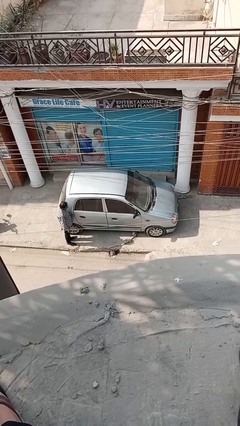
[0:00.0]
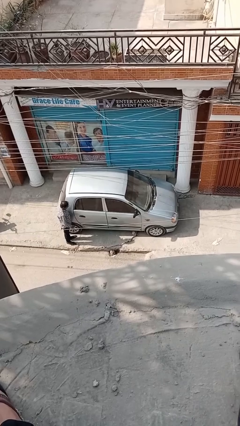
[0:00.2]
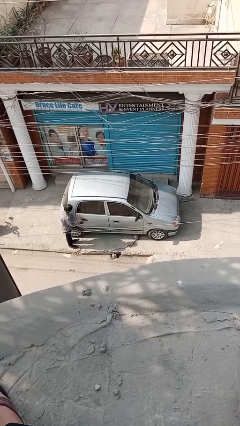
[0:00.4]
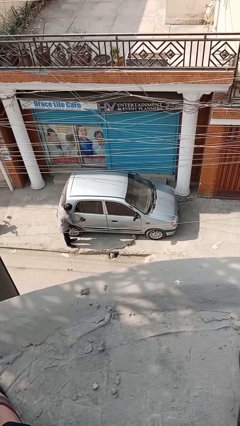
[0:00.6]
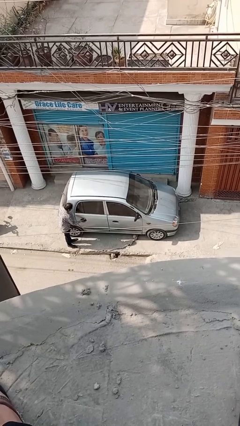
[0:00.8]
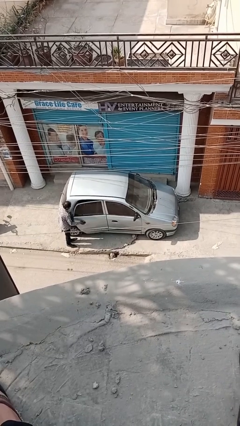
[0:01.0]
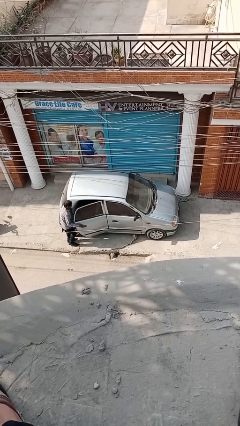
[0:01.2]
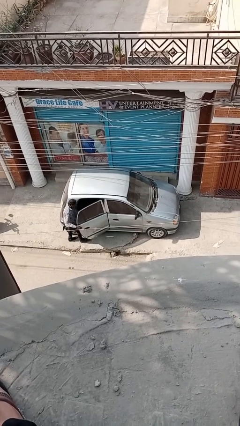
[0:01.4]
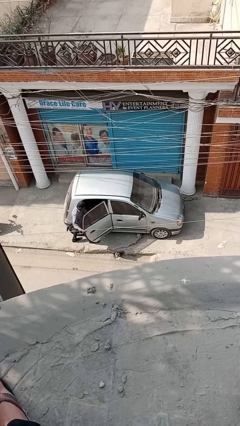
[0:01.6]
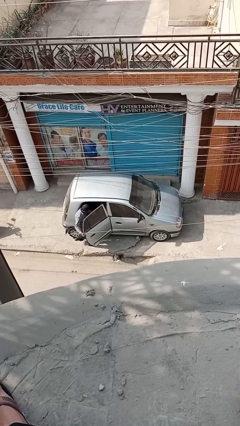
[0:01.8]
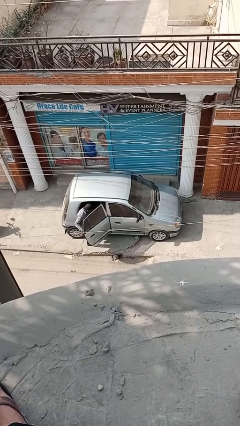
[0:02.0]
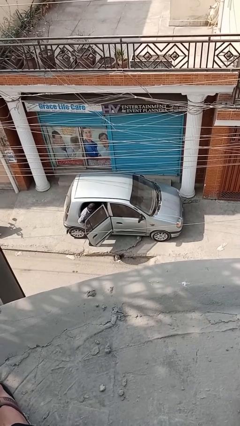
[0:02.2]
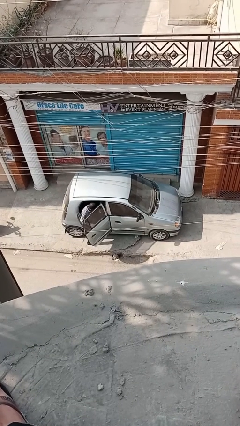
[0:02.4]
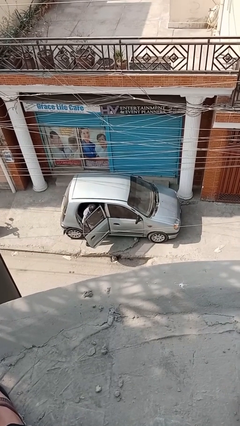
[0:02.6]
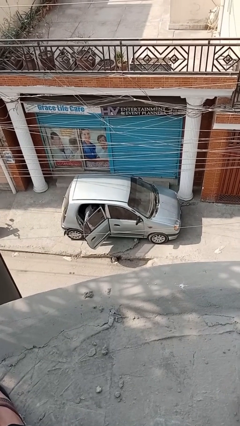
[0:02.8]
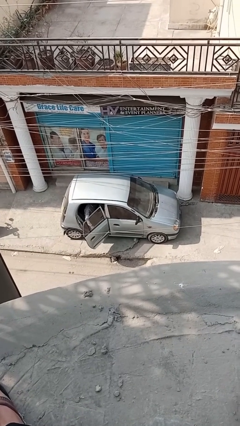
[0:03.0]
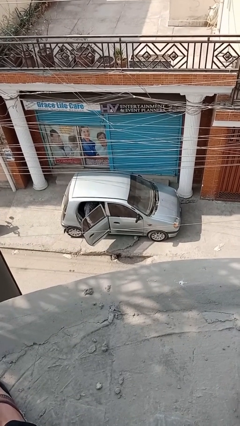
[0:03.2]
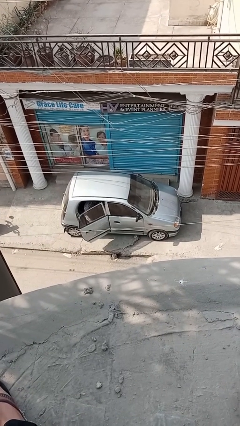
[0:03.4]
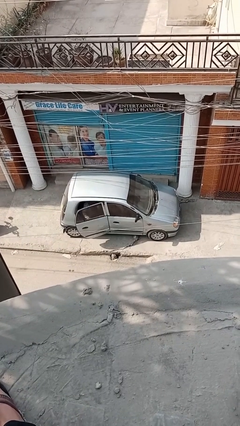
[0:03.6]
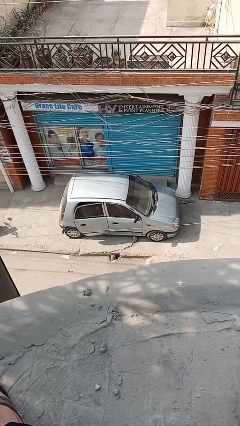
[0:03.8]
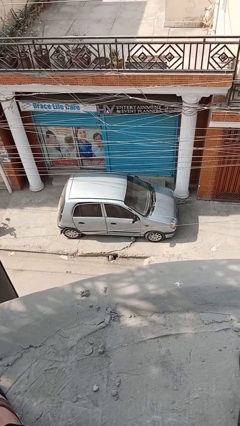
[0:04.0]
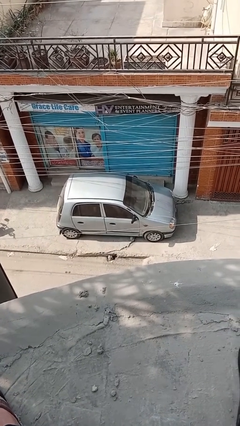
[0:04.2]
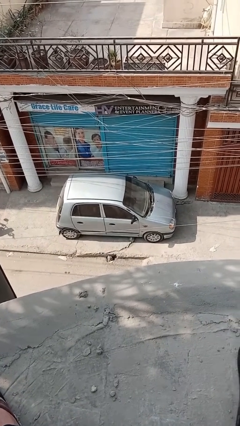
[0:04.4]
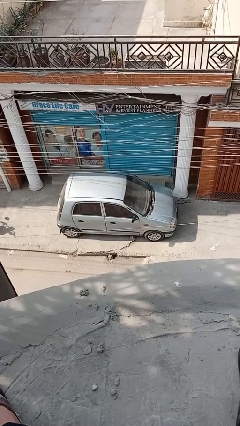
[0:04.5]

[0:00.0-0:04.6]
car picks up person

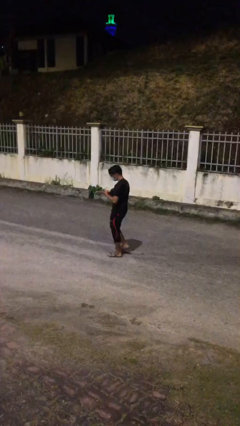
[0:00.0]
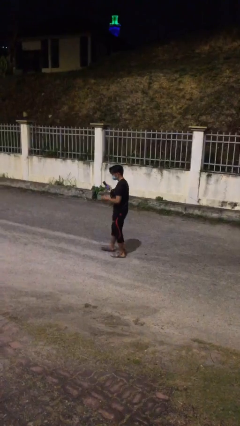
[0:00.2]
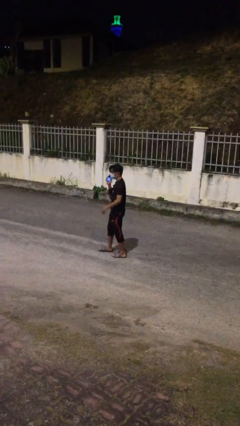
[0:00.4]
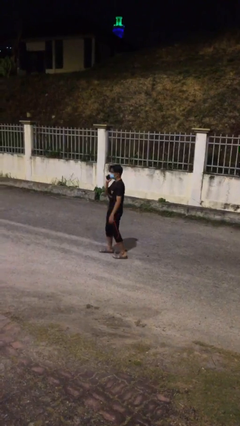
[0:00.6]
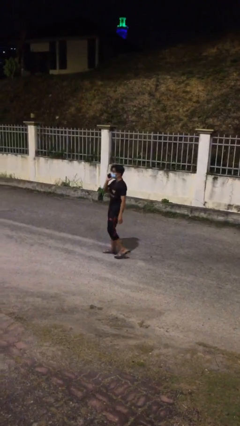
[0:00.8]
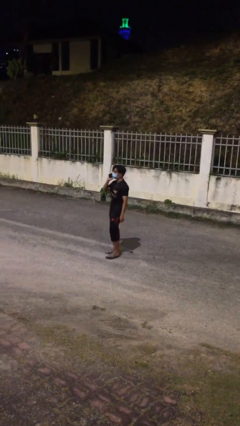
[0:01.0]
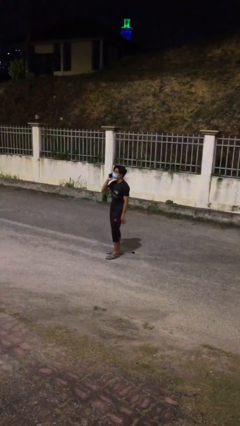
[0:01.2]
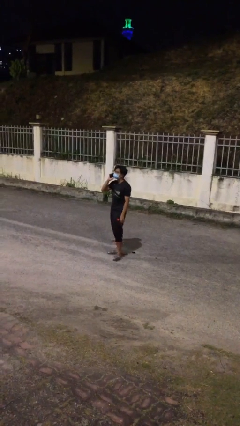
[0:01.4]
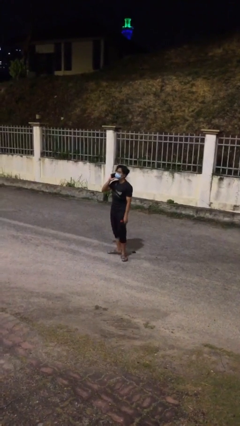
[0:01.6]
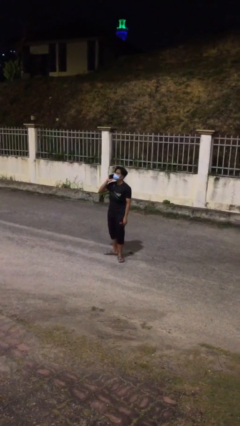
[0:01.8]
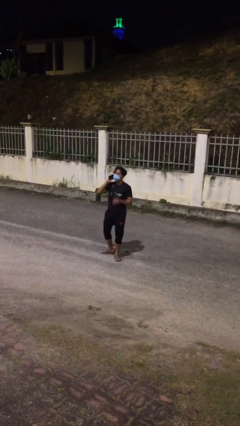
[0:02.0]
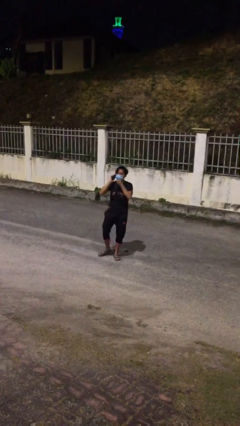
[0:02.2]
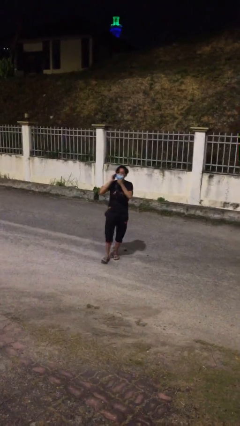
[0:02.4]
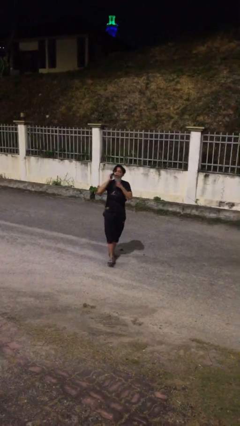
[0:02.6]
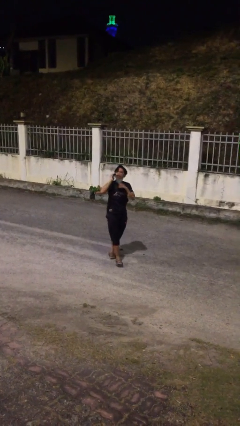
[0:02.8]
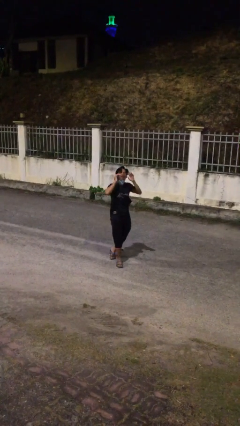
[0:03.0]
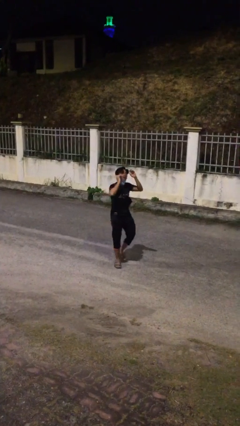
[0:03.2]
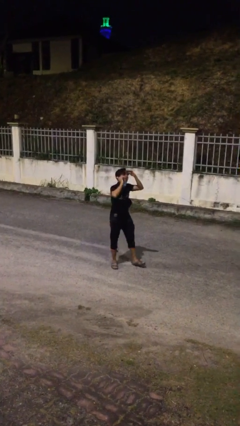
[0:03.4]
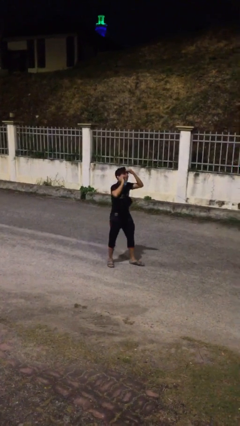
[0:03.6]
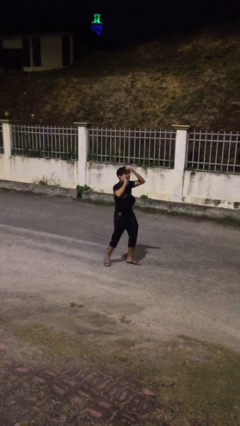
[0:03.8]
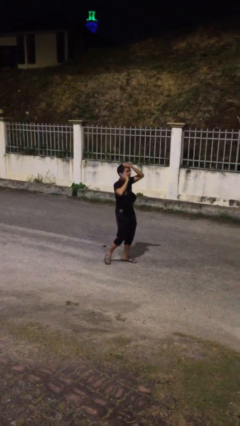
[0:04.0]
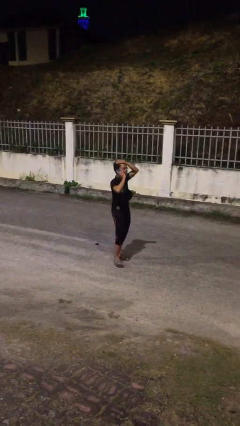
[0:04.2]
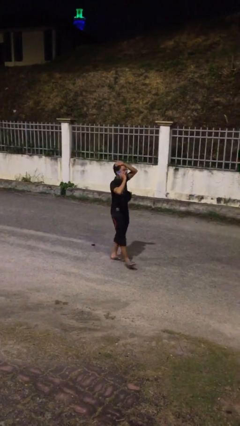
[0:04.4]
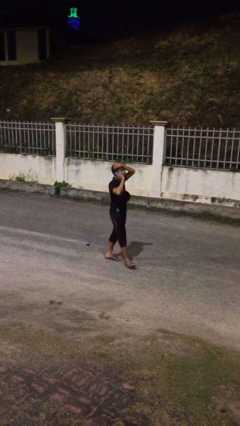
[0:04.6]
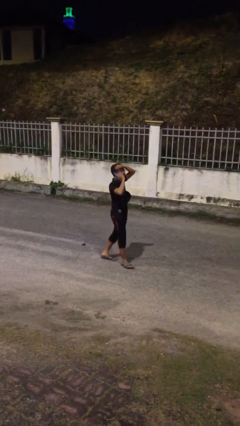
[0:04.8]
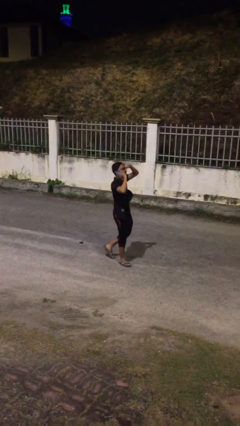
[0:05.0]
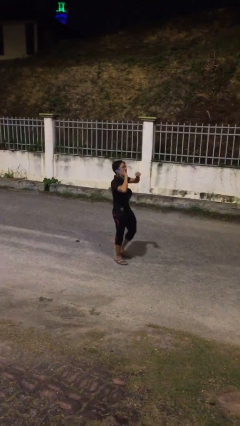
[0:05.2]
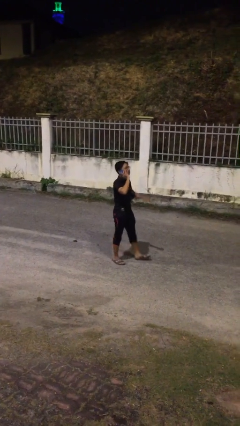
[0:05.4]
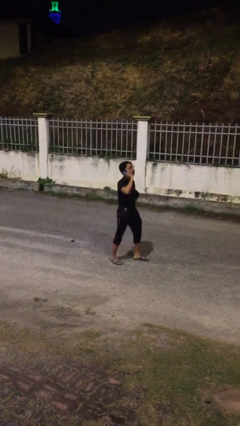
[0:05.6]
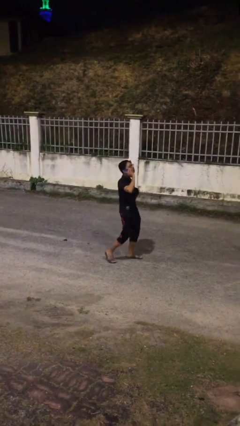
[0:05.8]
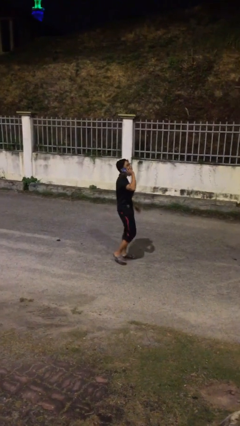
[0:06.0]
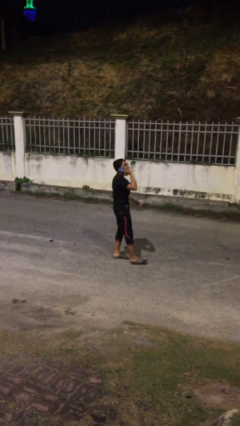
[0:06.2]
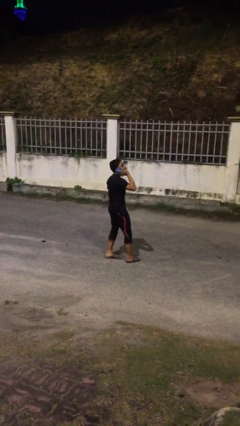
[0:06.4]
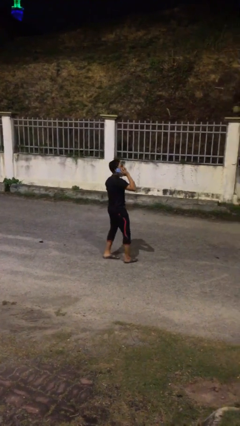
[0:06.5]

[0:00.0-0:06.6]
person talks on phone

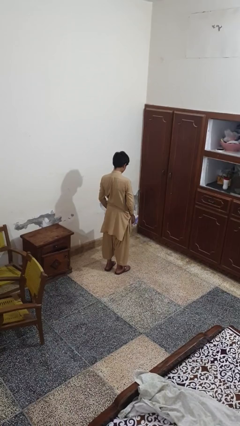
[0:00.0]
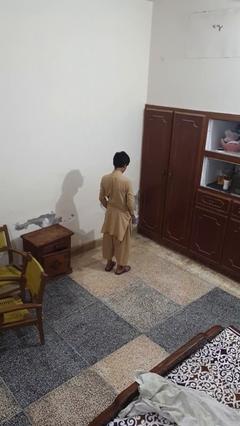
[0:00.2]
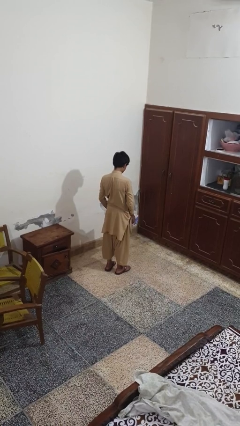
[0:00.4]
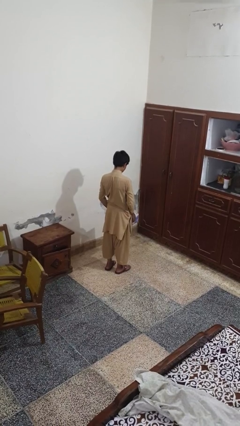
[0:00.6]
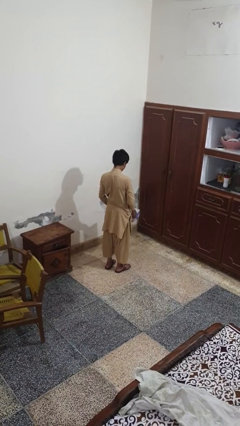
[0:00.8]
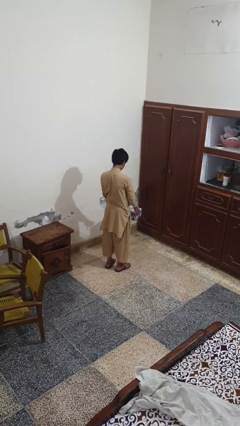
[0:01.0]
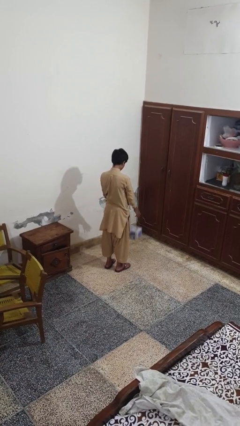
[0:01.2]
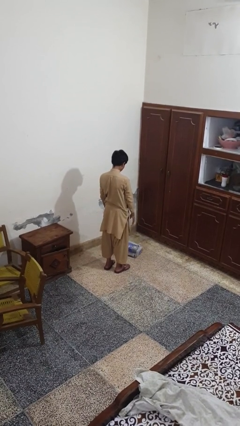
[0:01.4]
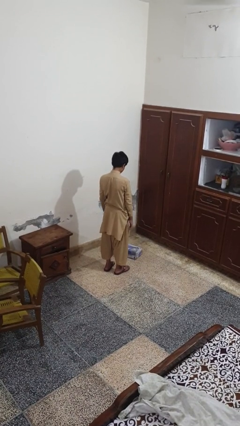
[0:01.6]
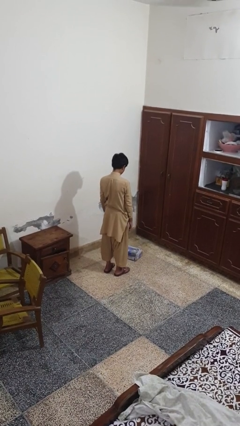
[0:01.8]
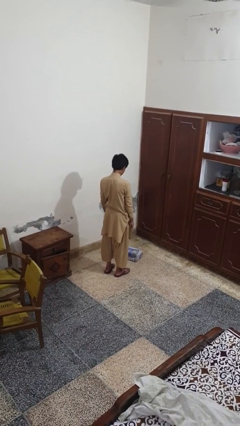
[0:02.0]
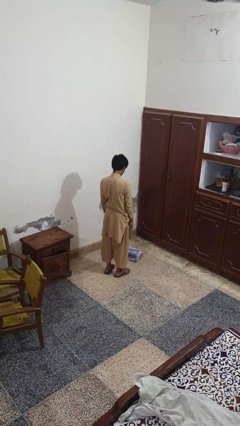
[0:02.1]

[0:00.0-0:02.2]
person throws object to ground

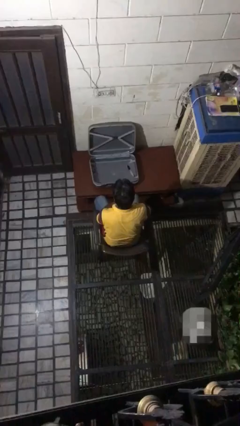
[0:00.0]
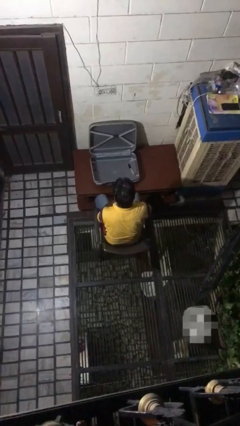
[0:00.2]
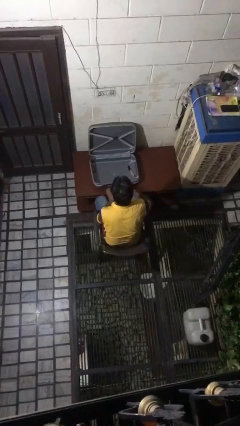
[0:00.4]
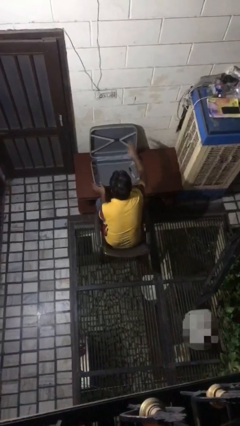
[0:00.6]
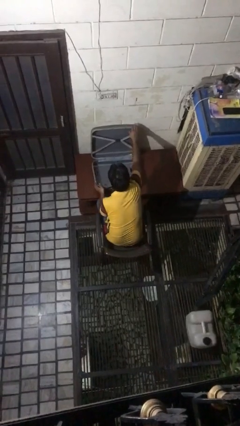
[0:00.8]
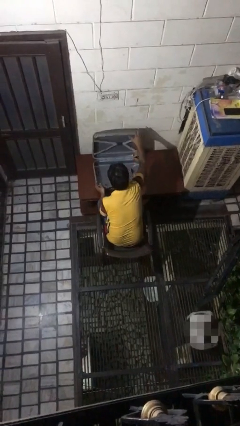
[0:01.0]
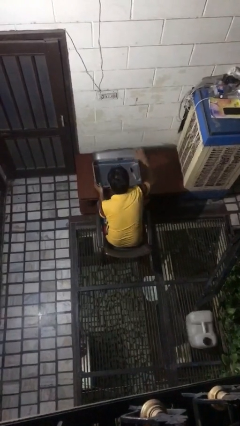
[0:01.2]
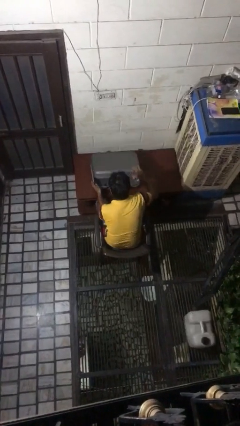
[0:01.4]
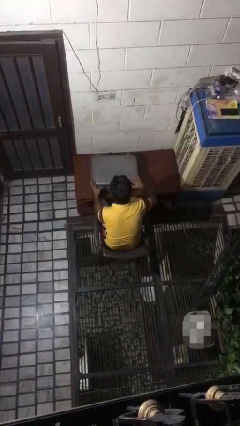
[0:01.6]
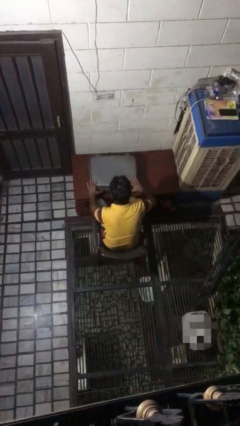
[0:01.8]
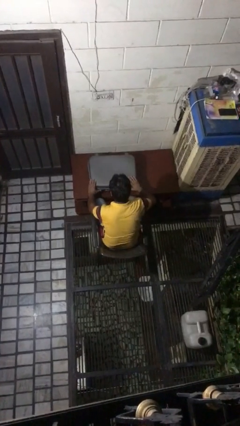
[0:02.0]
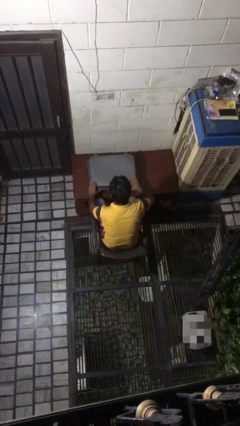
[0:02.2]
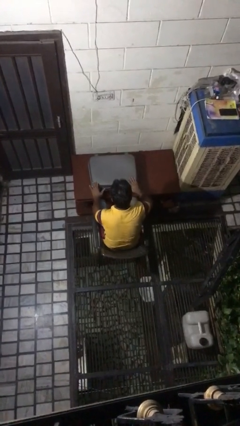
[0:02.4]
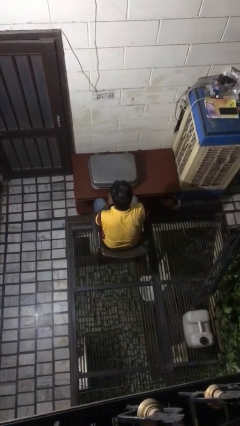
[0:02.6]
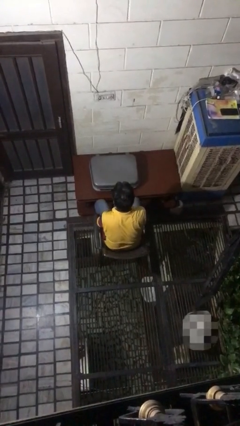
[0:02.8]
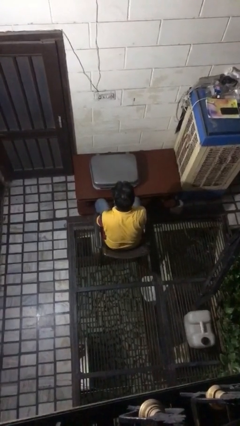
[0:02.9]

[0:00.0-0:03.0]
person closes suitcase

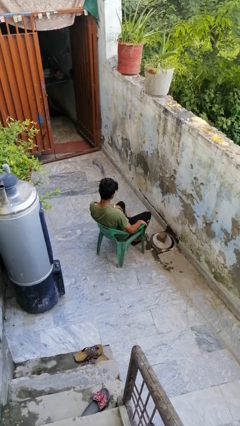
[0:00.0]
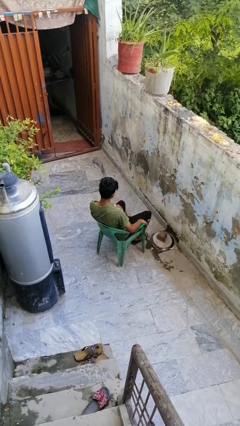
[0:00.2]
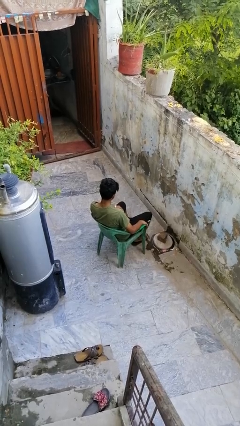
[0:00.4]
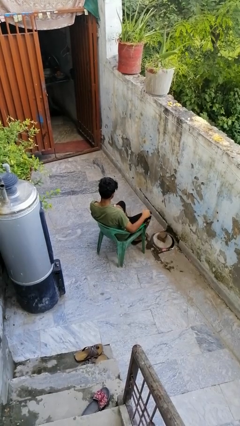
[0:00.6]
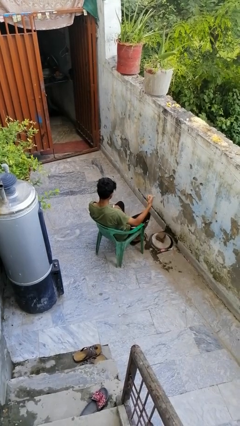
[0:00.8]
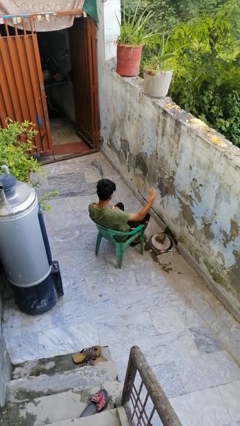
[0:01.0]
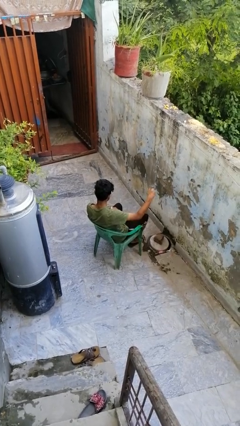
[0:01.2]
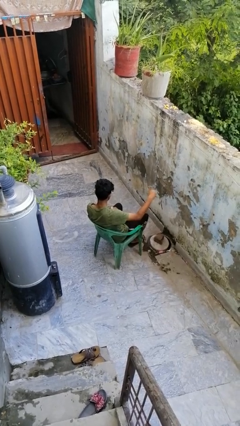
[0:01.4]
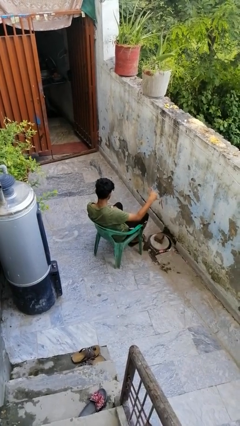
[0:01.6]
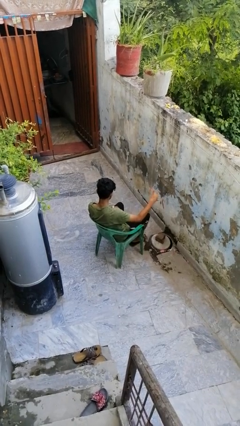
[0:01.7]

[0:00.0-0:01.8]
person gestures hang loose
